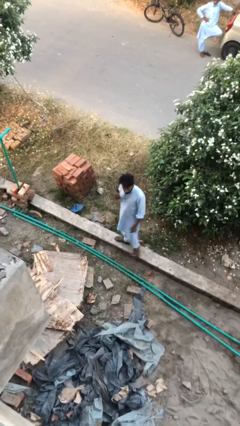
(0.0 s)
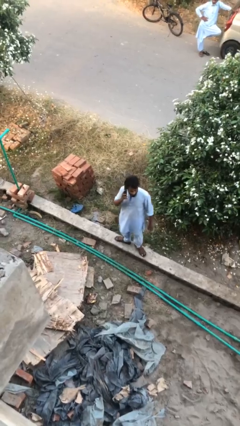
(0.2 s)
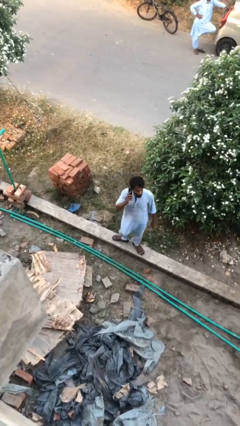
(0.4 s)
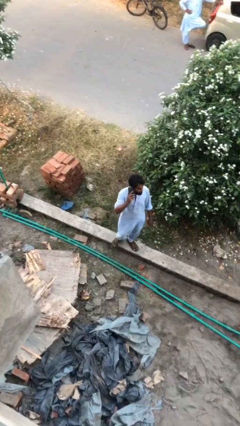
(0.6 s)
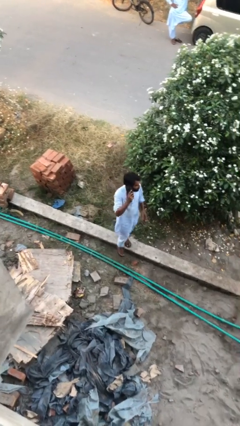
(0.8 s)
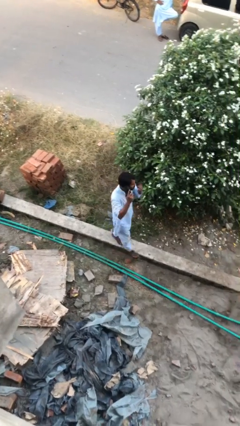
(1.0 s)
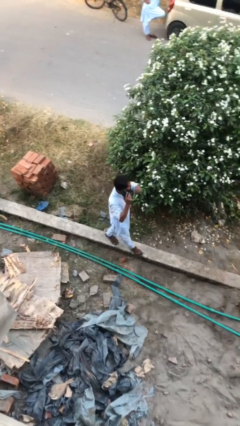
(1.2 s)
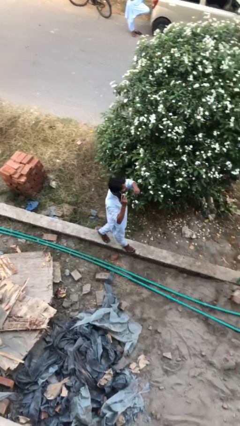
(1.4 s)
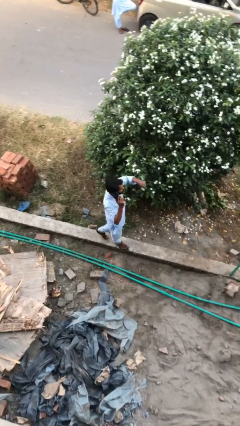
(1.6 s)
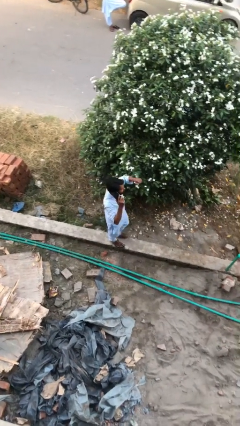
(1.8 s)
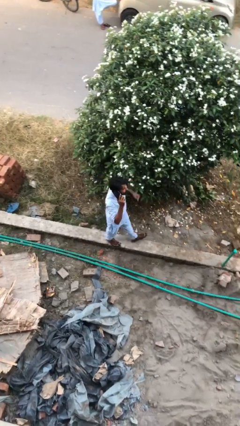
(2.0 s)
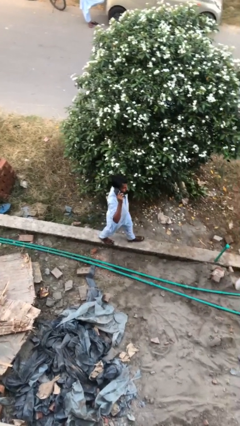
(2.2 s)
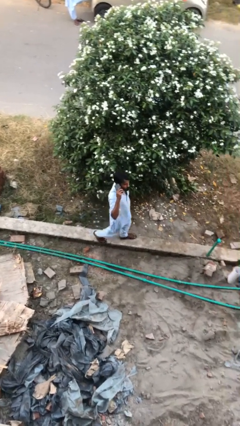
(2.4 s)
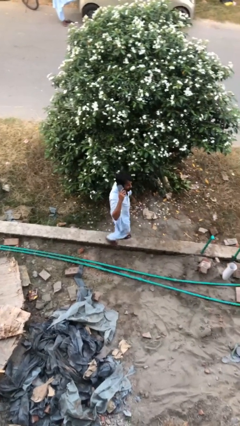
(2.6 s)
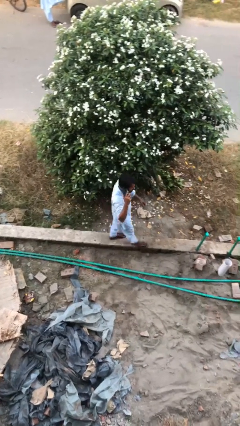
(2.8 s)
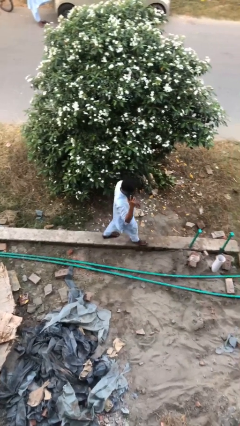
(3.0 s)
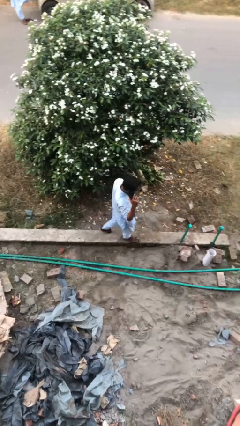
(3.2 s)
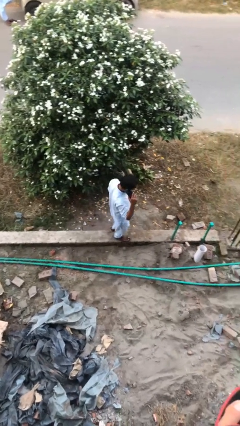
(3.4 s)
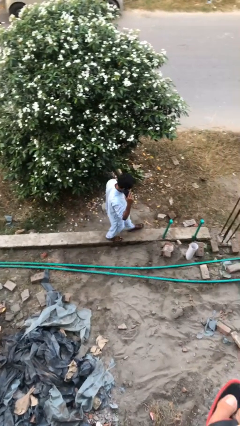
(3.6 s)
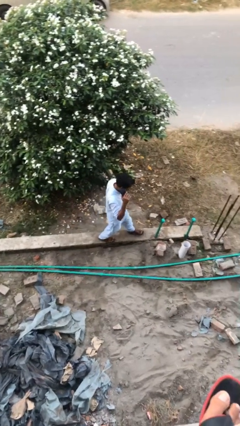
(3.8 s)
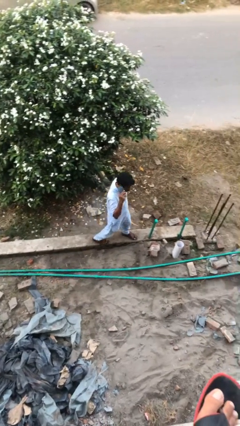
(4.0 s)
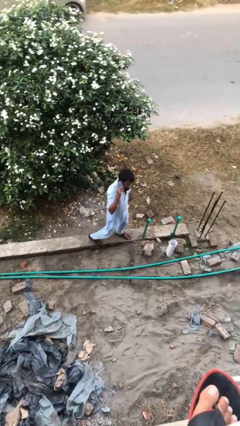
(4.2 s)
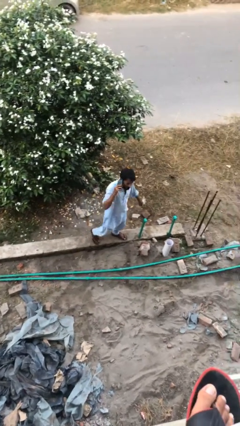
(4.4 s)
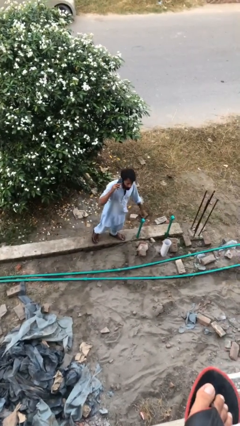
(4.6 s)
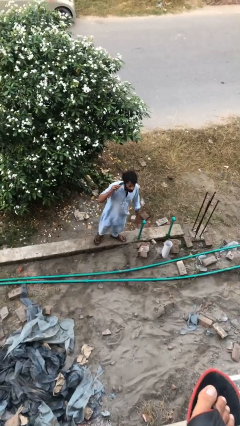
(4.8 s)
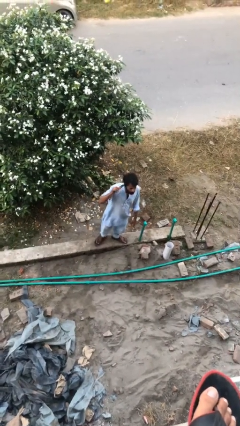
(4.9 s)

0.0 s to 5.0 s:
person talks on phone

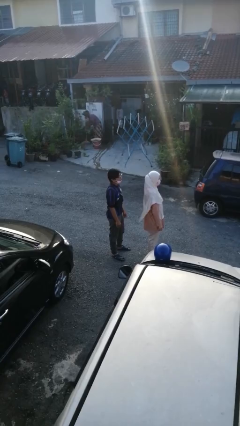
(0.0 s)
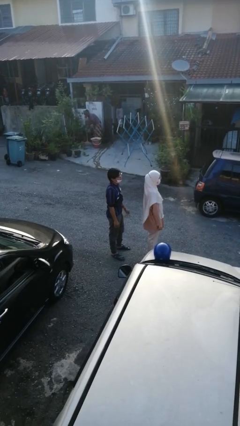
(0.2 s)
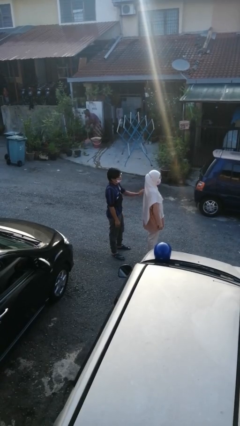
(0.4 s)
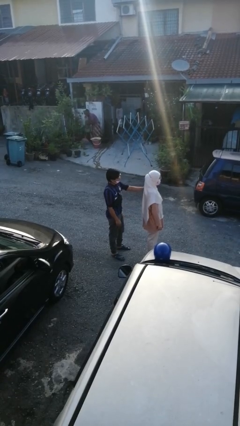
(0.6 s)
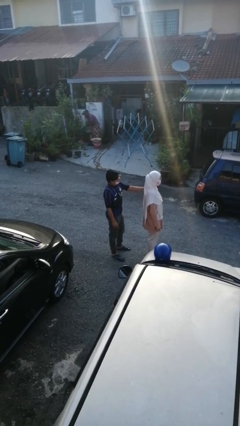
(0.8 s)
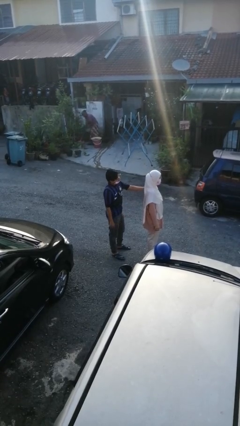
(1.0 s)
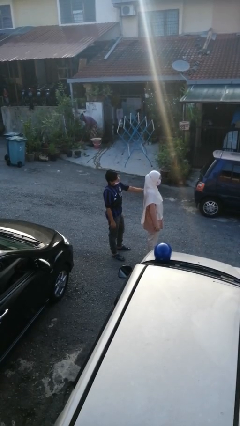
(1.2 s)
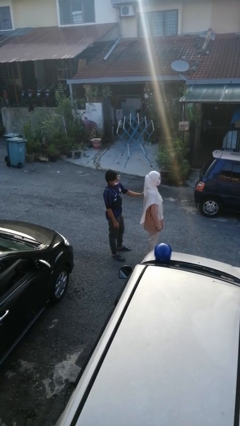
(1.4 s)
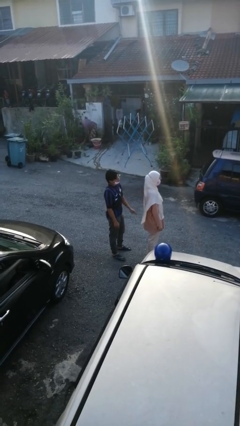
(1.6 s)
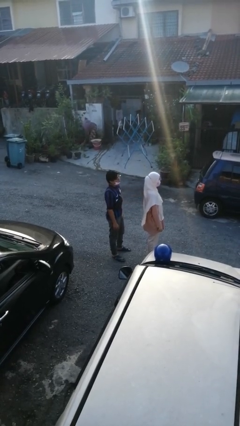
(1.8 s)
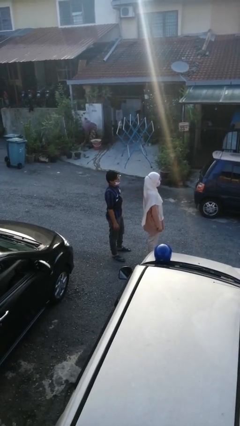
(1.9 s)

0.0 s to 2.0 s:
person touches back of person

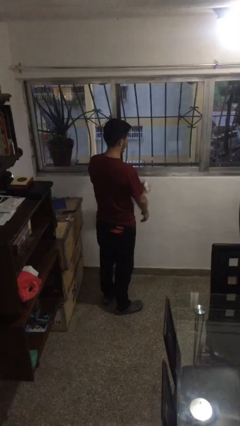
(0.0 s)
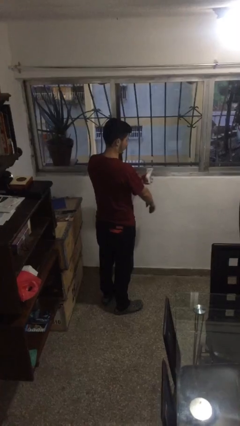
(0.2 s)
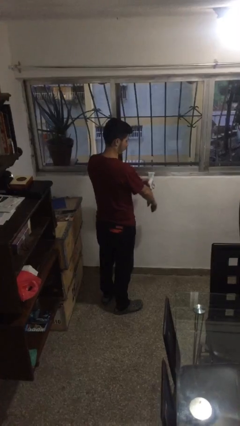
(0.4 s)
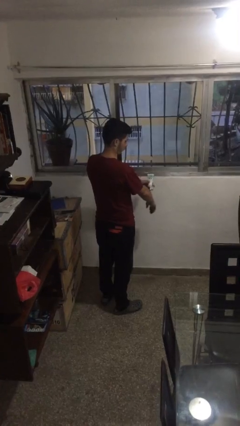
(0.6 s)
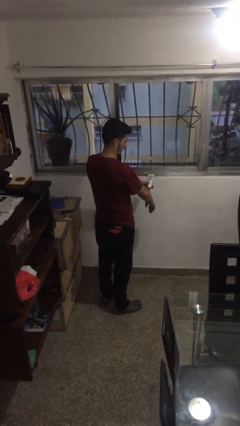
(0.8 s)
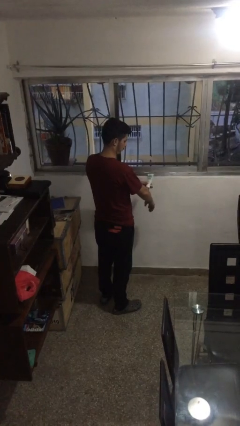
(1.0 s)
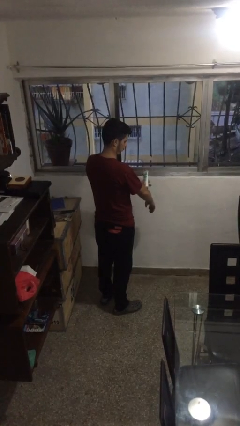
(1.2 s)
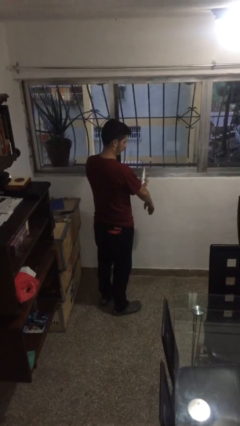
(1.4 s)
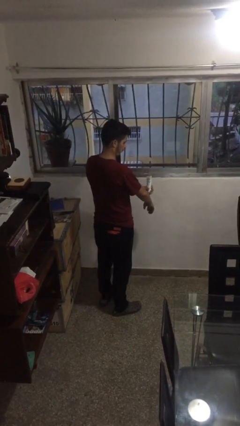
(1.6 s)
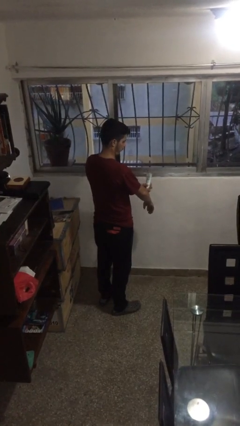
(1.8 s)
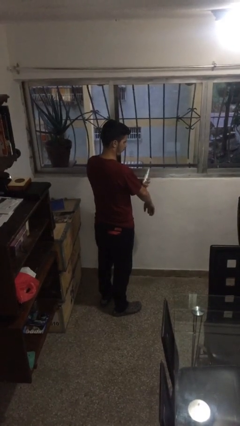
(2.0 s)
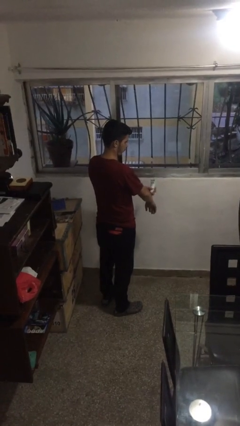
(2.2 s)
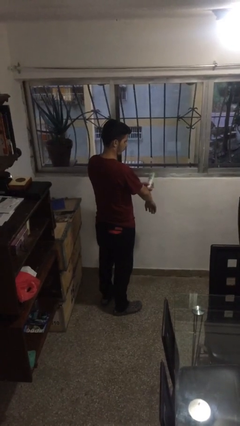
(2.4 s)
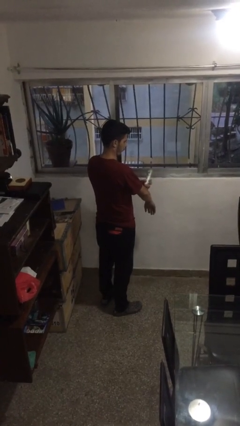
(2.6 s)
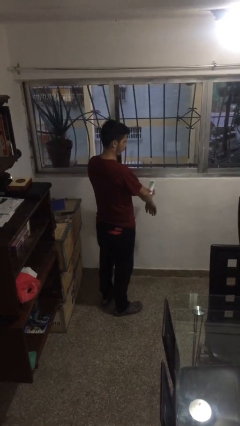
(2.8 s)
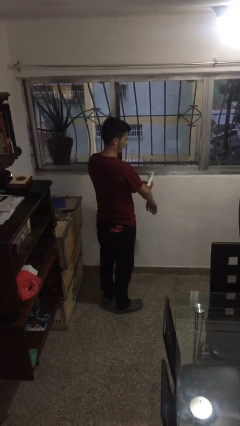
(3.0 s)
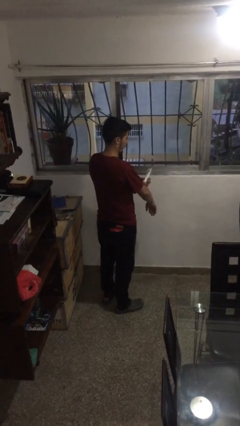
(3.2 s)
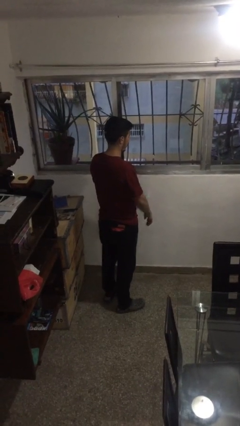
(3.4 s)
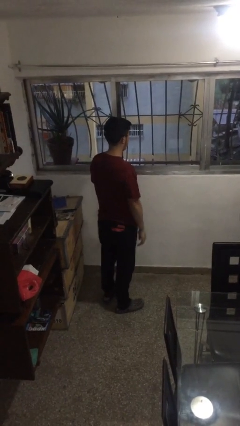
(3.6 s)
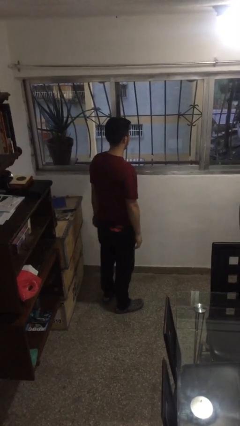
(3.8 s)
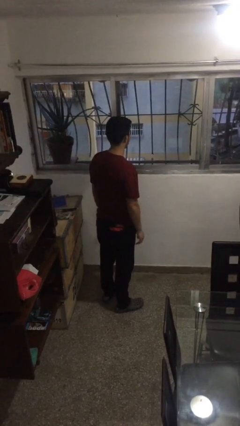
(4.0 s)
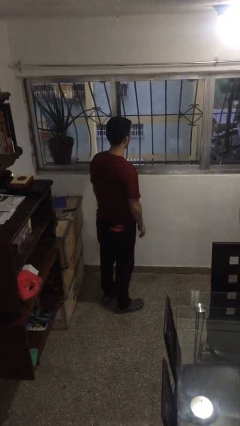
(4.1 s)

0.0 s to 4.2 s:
person applies sunscreen

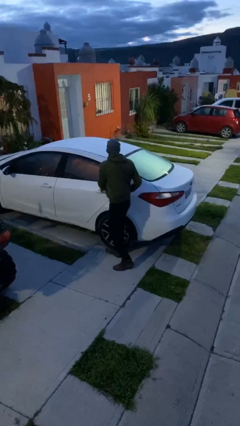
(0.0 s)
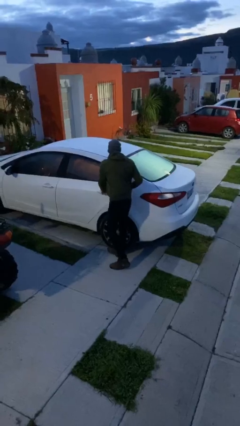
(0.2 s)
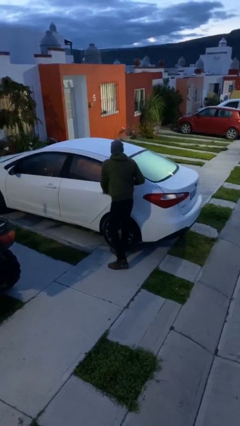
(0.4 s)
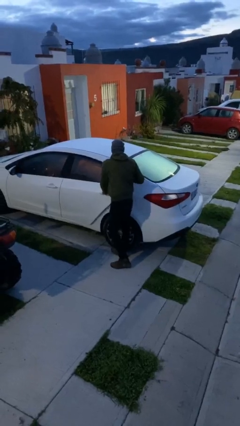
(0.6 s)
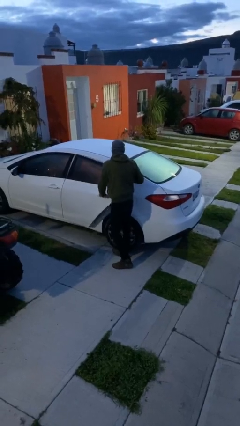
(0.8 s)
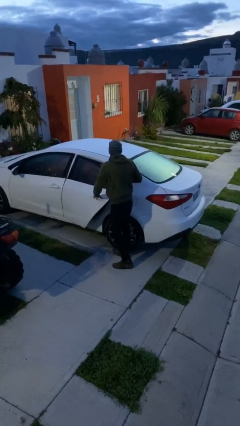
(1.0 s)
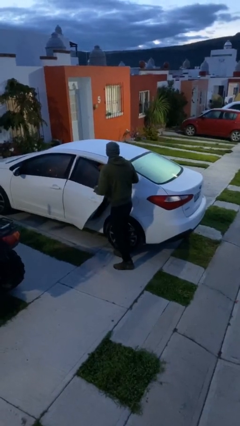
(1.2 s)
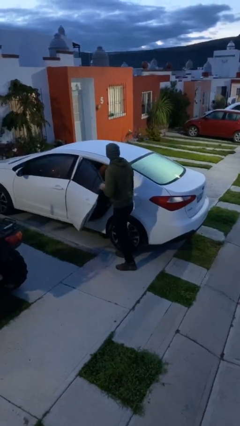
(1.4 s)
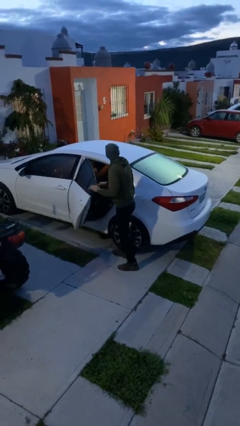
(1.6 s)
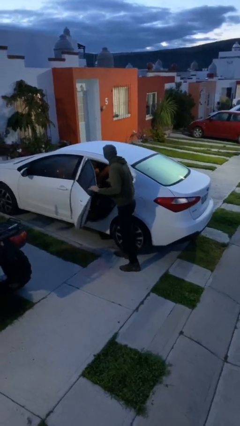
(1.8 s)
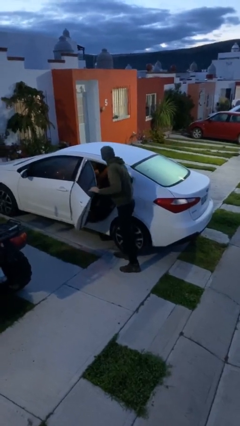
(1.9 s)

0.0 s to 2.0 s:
person opens car door

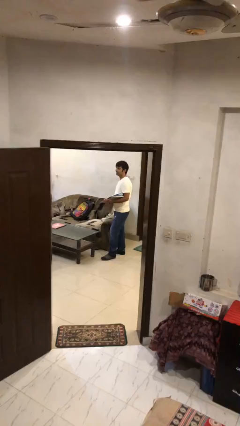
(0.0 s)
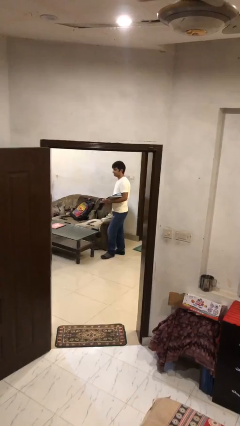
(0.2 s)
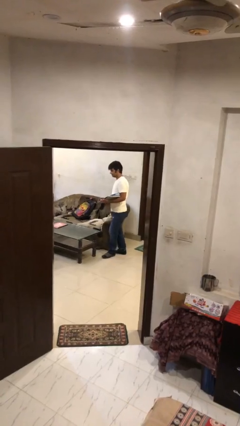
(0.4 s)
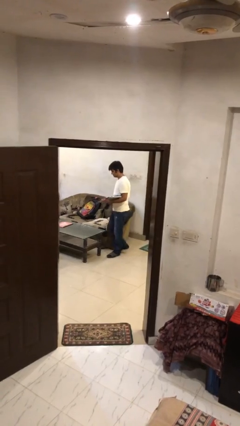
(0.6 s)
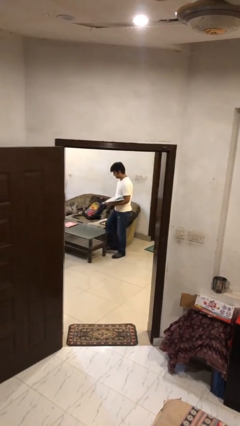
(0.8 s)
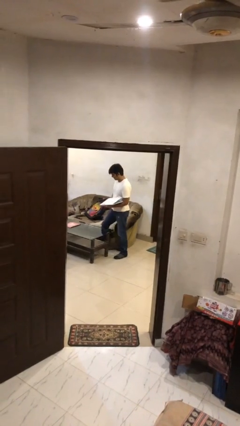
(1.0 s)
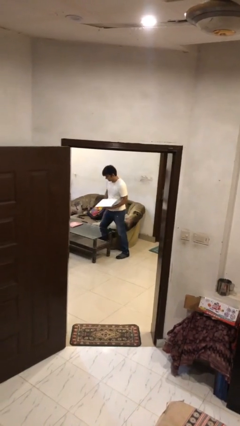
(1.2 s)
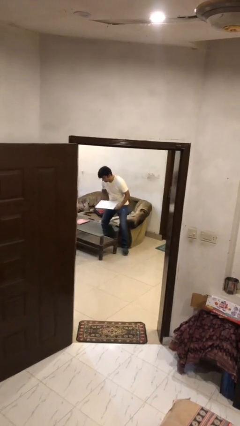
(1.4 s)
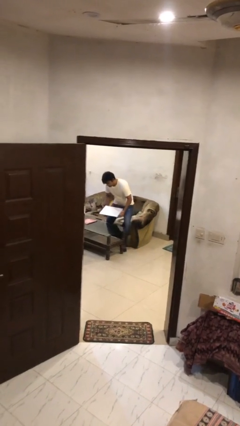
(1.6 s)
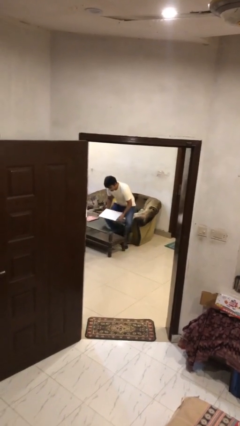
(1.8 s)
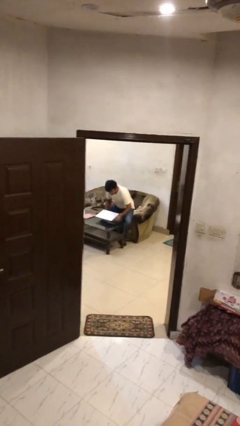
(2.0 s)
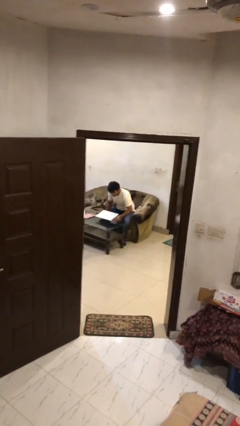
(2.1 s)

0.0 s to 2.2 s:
person sits down

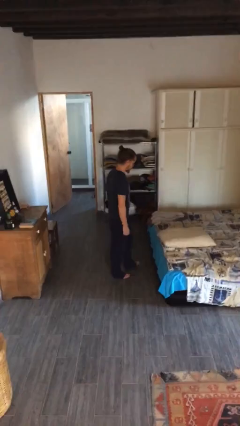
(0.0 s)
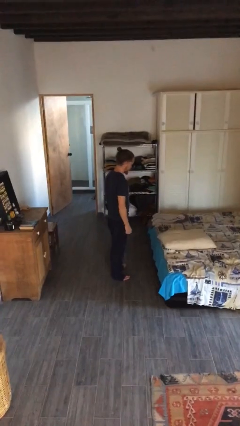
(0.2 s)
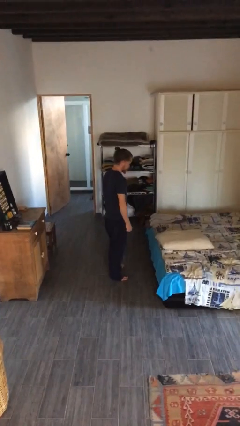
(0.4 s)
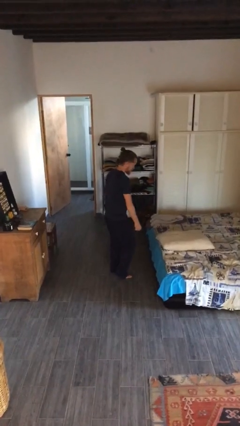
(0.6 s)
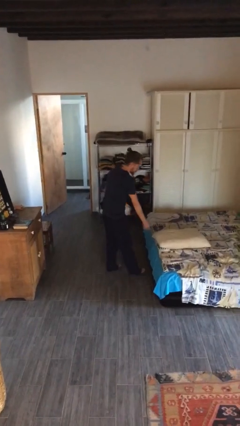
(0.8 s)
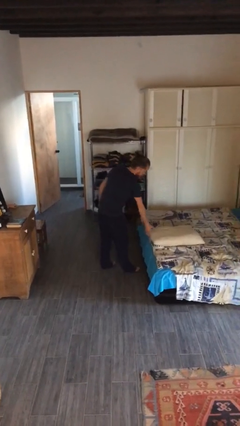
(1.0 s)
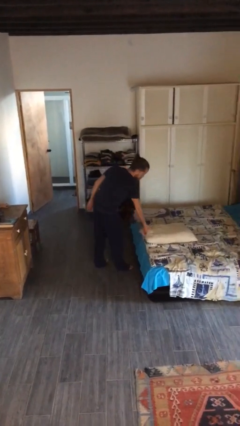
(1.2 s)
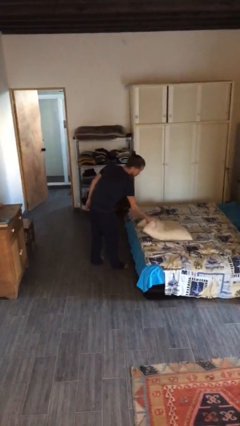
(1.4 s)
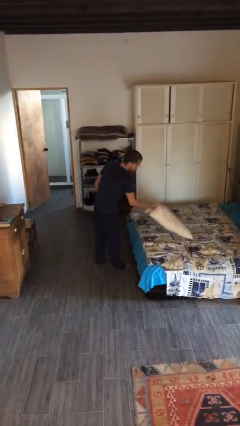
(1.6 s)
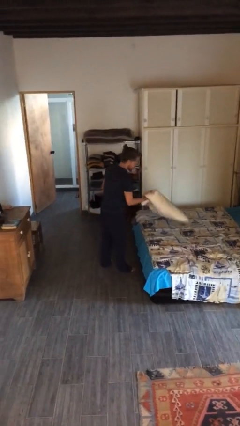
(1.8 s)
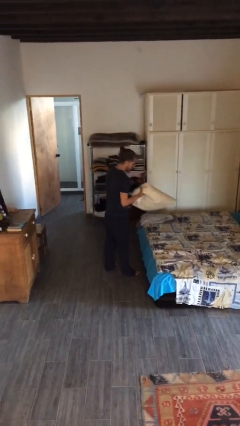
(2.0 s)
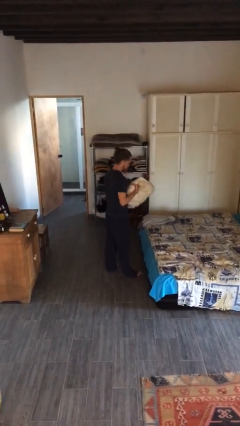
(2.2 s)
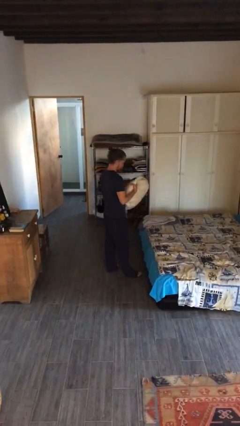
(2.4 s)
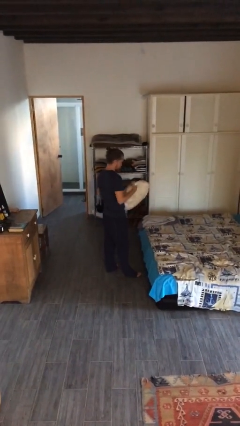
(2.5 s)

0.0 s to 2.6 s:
person picks up object from bed
